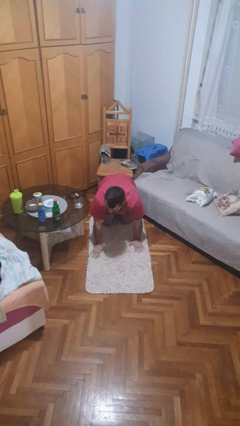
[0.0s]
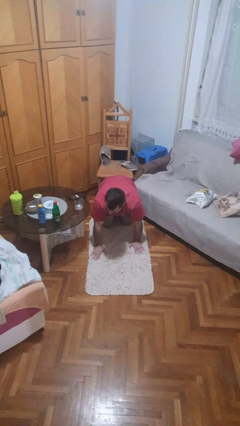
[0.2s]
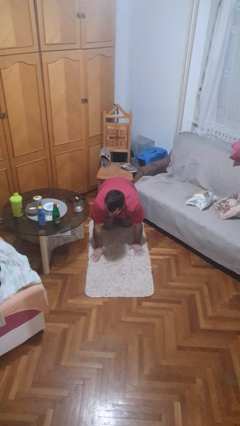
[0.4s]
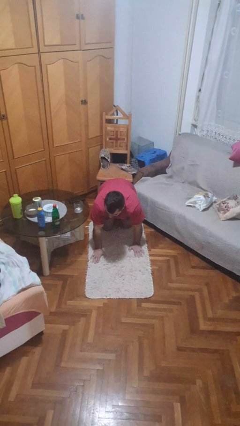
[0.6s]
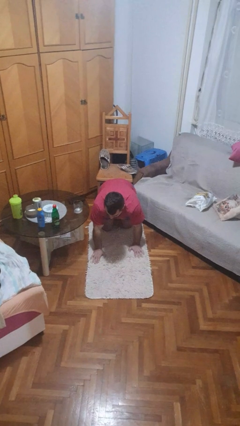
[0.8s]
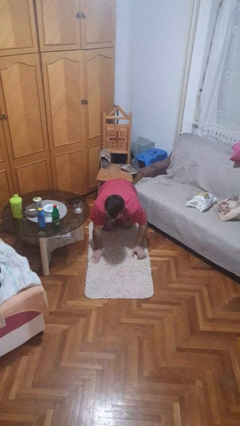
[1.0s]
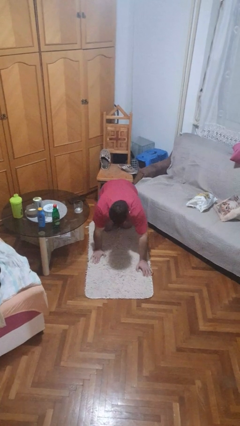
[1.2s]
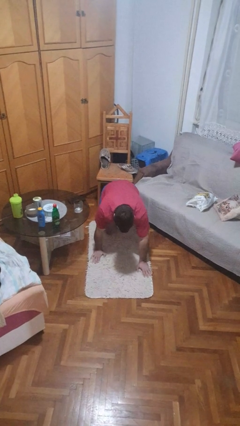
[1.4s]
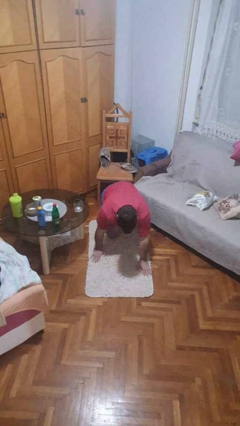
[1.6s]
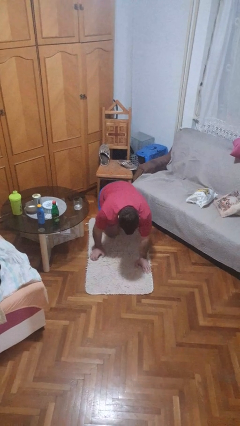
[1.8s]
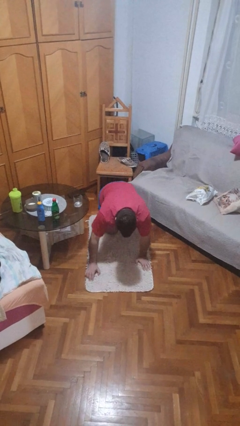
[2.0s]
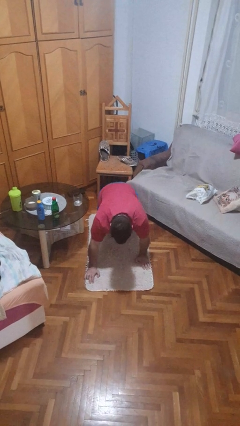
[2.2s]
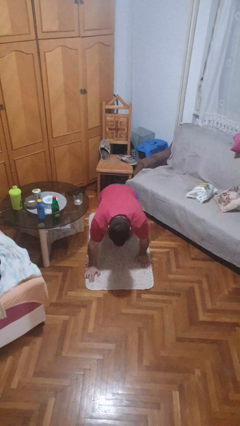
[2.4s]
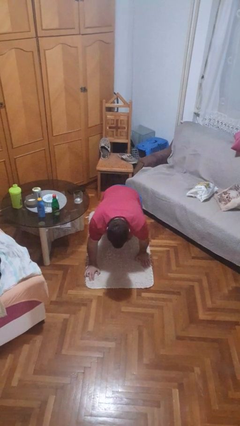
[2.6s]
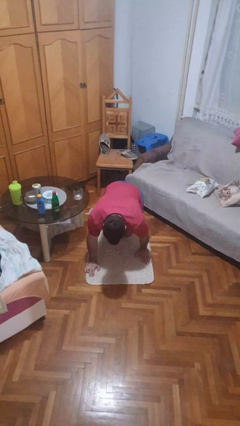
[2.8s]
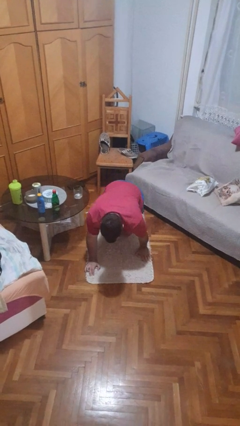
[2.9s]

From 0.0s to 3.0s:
person crawls

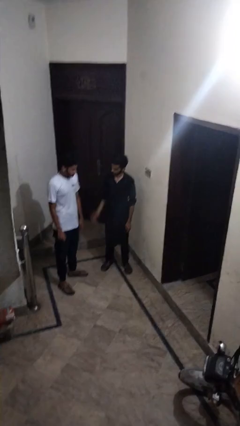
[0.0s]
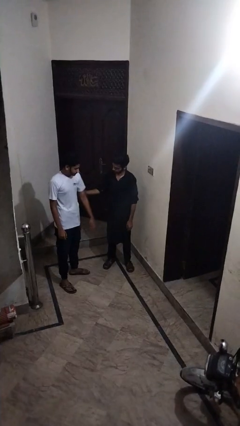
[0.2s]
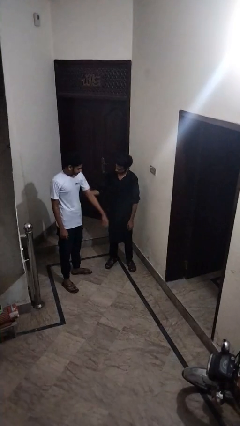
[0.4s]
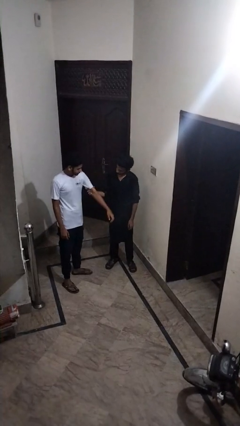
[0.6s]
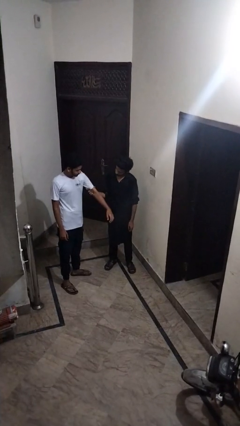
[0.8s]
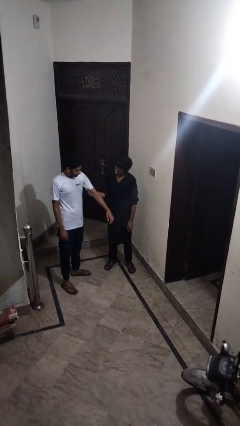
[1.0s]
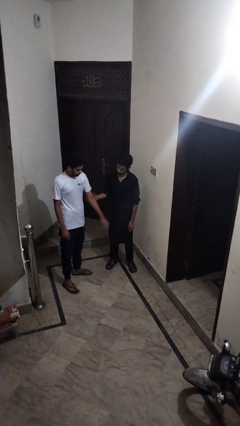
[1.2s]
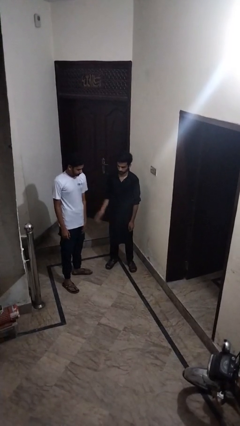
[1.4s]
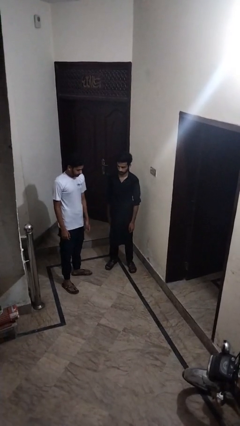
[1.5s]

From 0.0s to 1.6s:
person grabs person by bicep

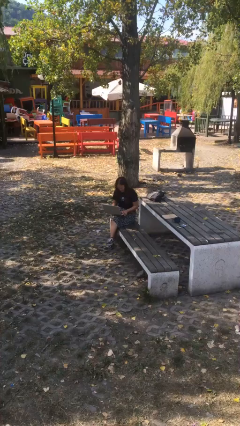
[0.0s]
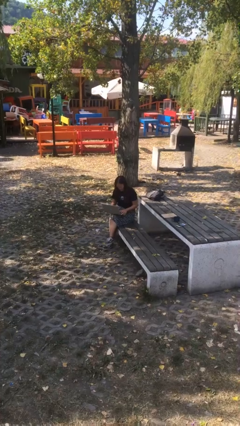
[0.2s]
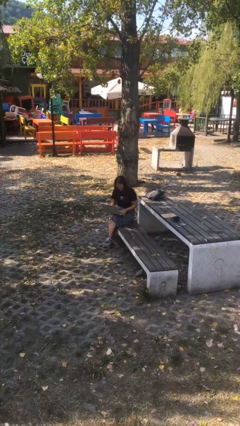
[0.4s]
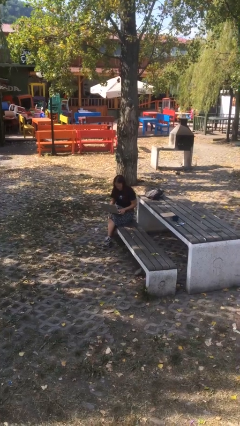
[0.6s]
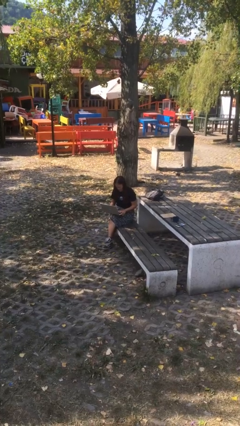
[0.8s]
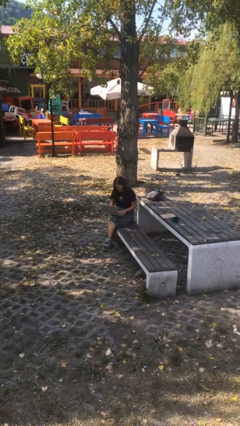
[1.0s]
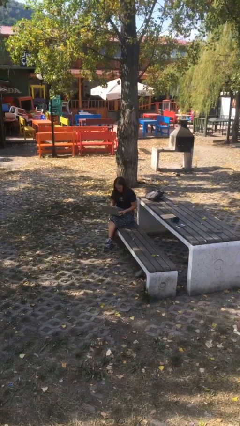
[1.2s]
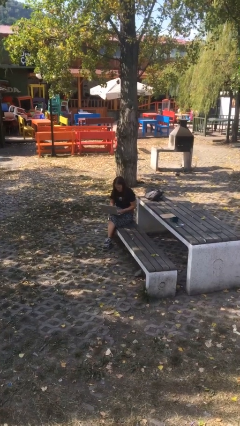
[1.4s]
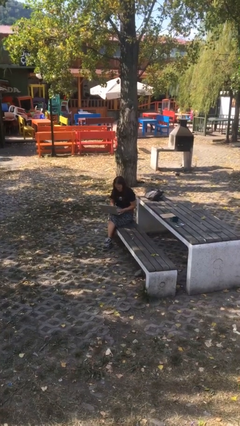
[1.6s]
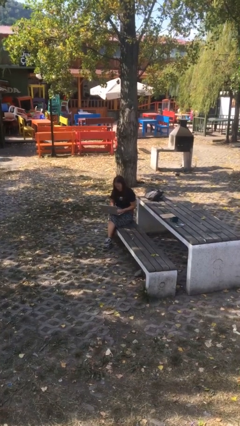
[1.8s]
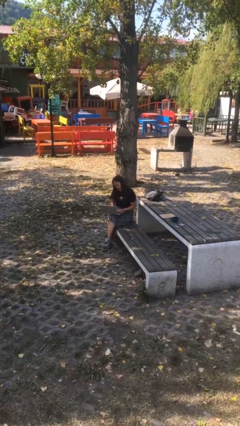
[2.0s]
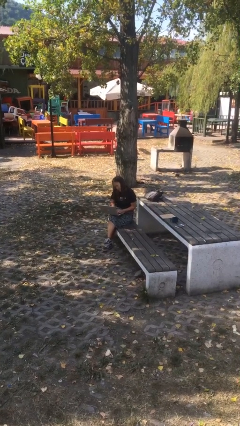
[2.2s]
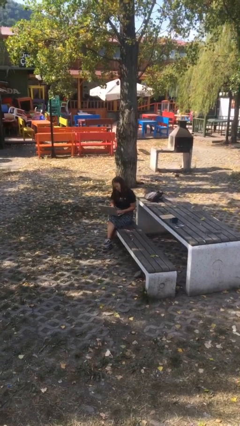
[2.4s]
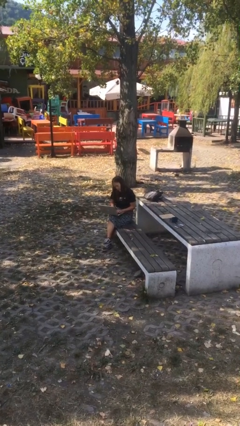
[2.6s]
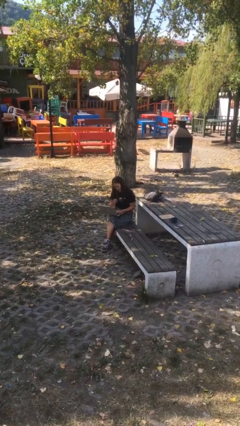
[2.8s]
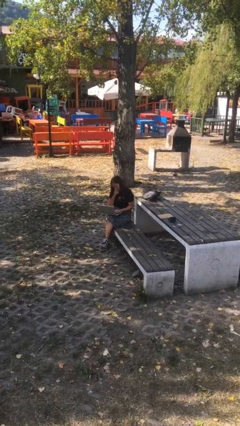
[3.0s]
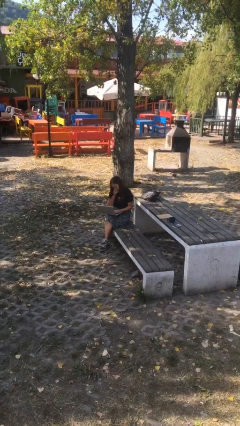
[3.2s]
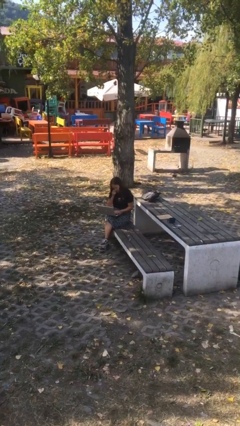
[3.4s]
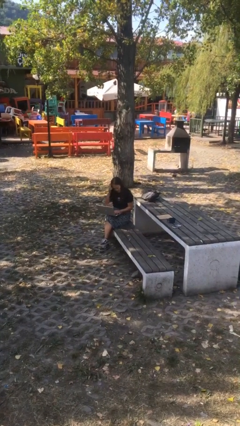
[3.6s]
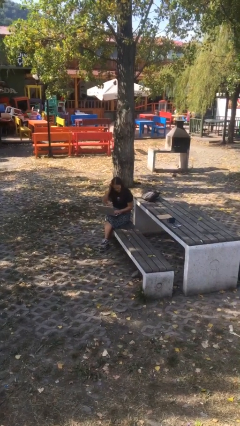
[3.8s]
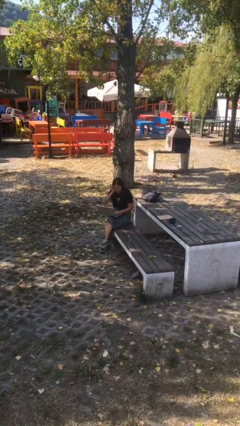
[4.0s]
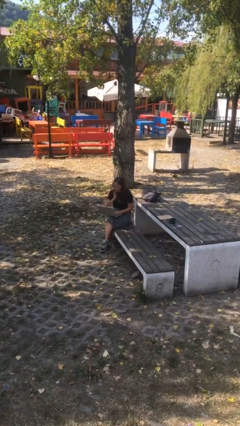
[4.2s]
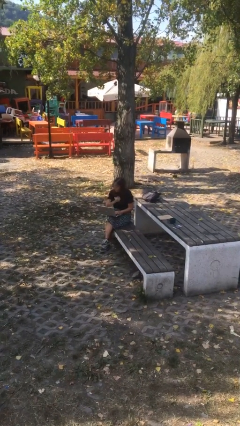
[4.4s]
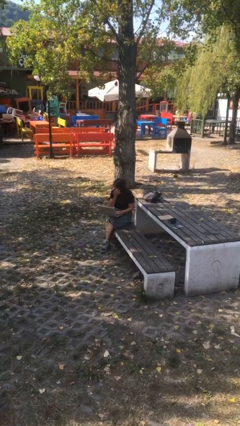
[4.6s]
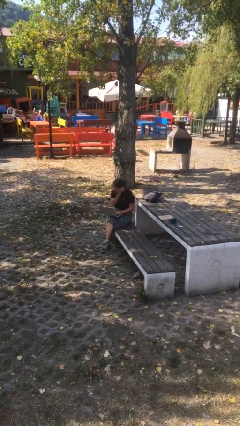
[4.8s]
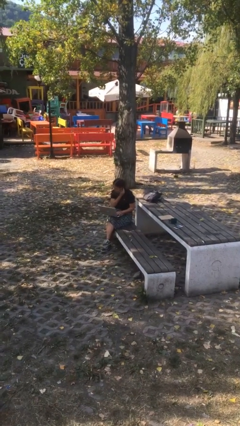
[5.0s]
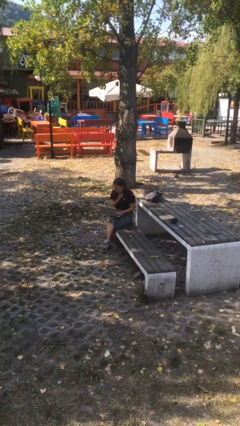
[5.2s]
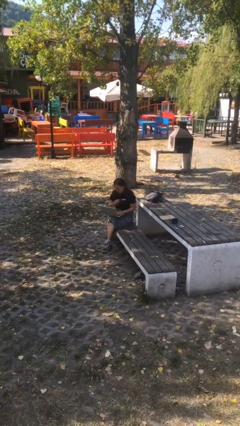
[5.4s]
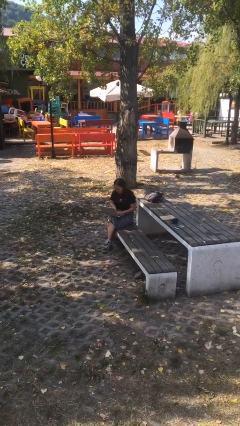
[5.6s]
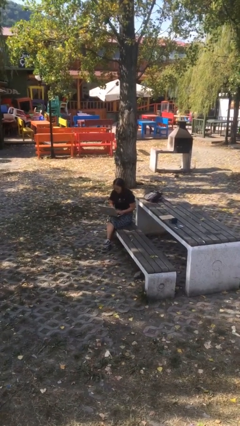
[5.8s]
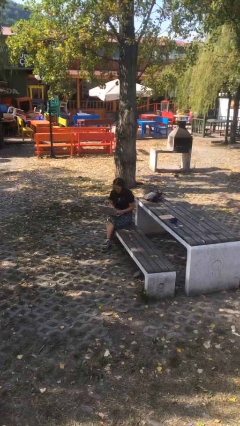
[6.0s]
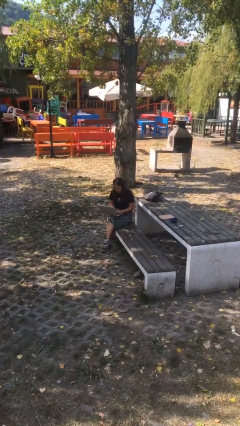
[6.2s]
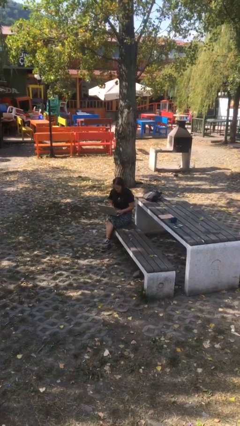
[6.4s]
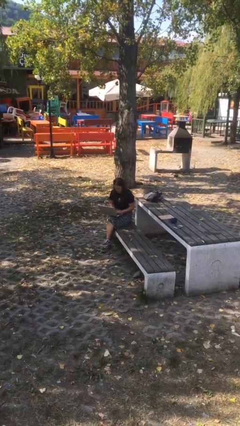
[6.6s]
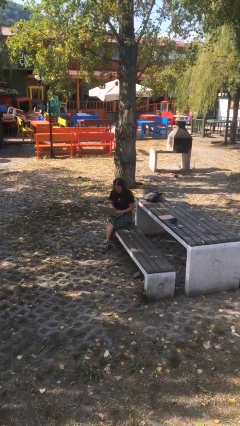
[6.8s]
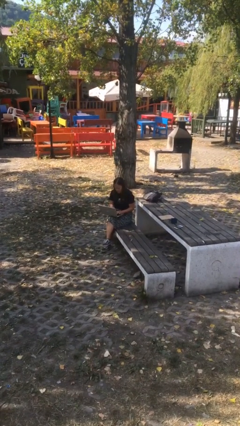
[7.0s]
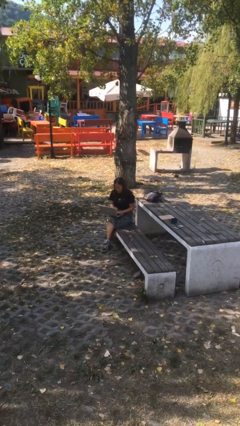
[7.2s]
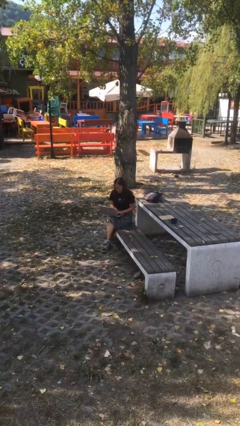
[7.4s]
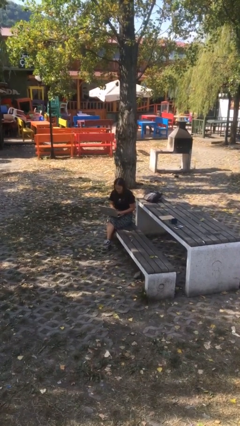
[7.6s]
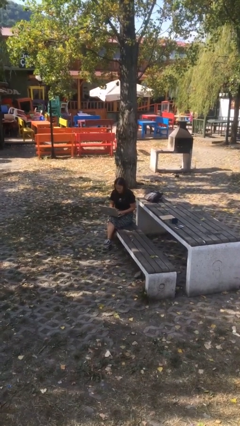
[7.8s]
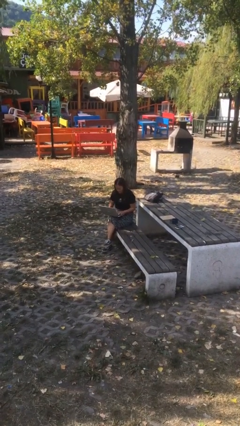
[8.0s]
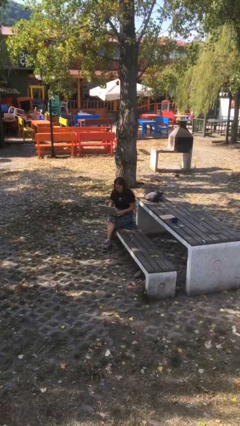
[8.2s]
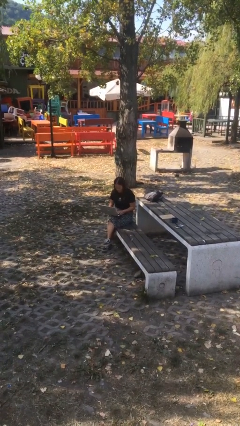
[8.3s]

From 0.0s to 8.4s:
person interacts with laptop

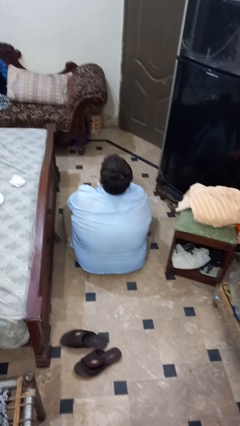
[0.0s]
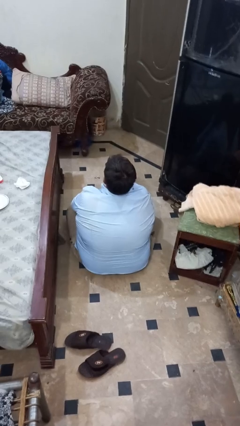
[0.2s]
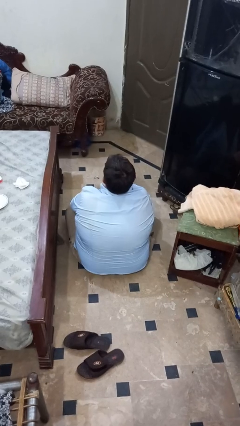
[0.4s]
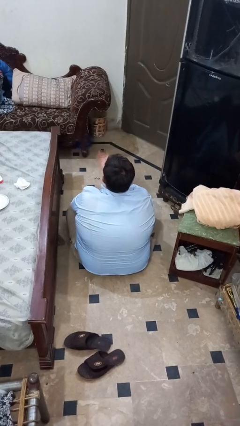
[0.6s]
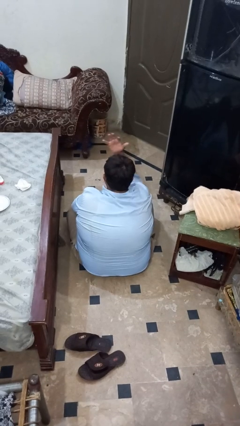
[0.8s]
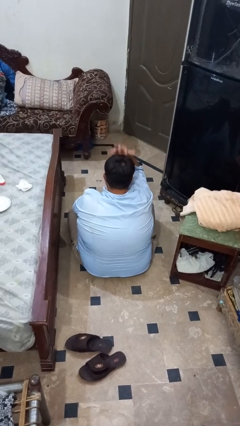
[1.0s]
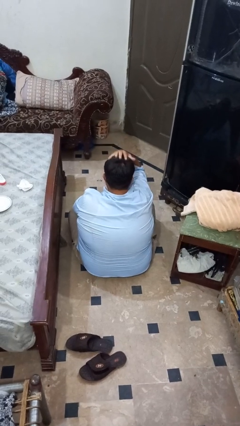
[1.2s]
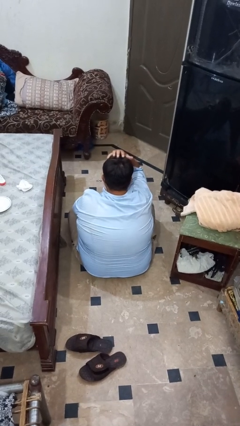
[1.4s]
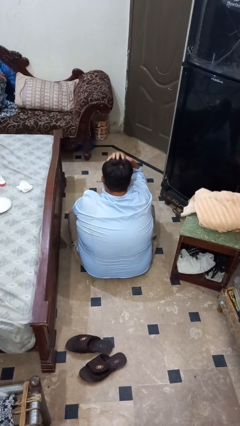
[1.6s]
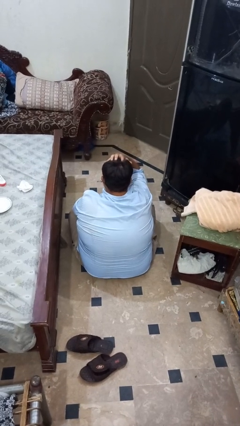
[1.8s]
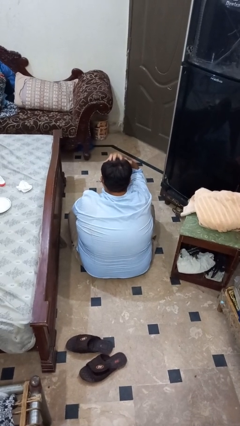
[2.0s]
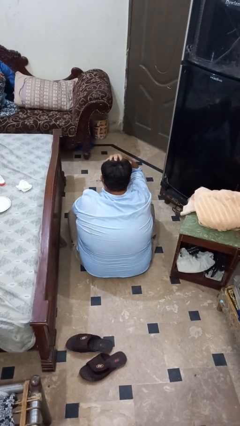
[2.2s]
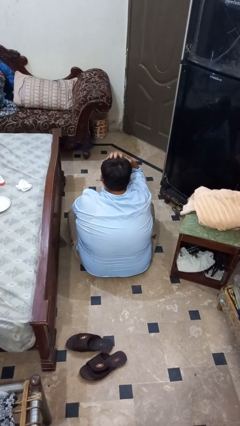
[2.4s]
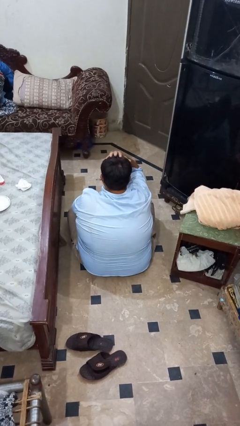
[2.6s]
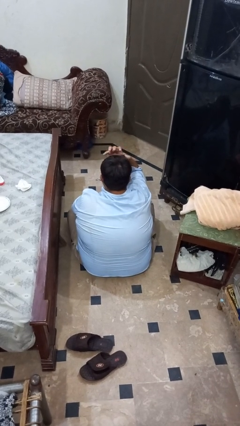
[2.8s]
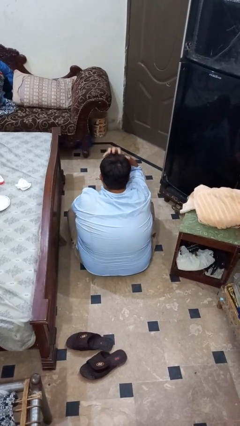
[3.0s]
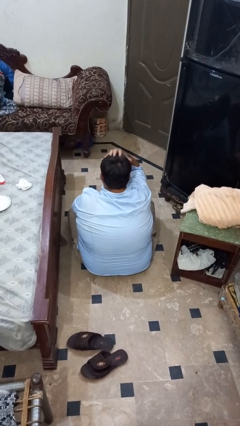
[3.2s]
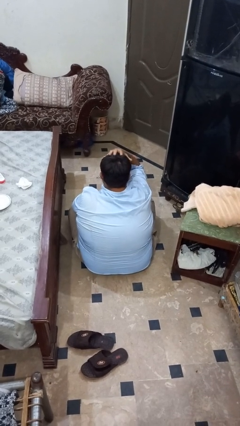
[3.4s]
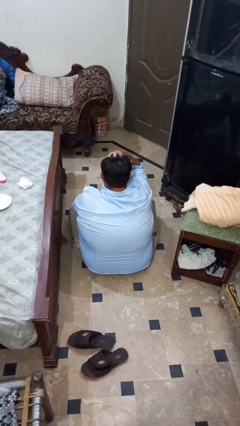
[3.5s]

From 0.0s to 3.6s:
person pats head

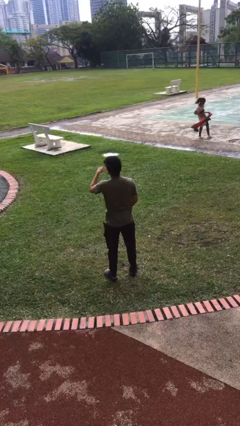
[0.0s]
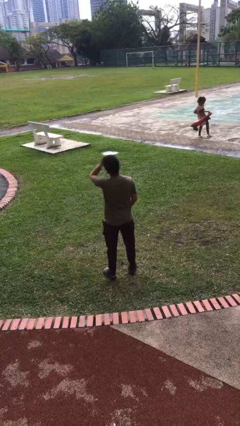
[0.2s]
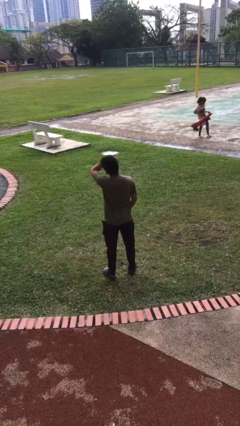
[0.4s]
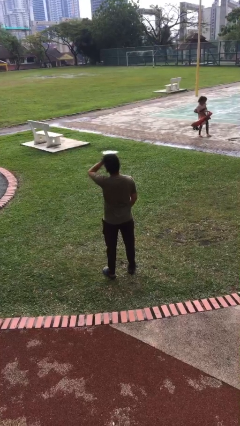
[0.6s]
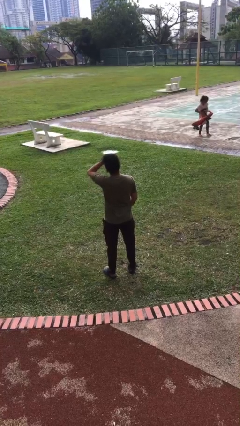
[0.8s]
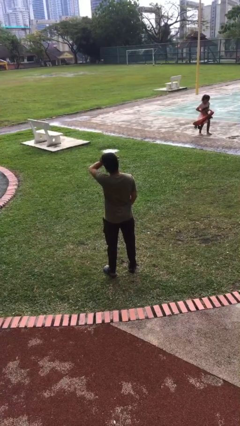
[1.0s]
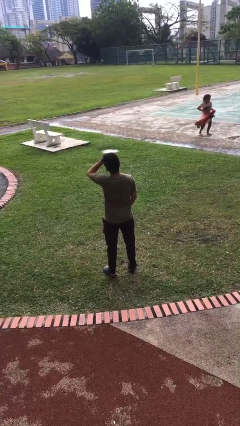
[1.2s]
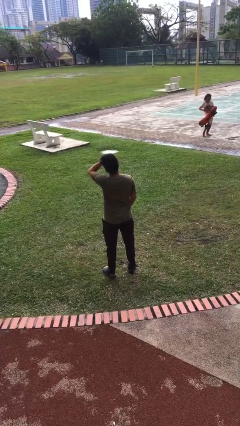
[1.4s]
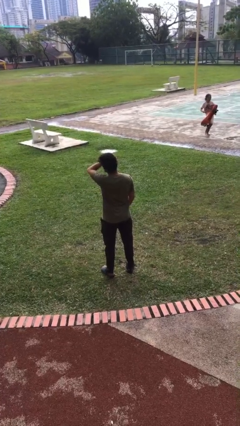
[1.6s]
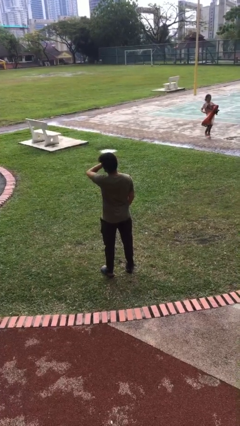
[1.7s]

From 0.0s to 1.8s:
person rubs eyes
